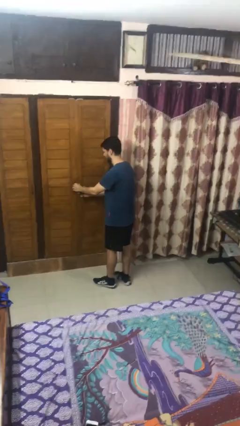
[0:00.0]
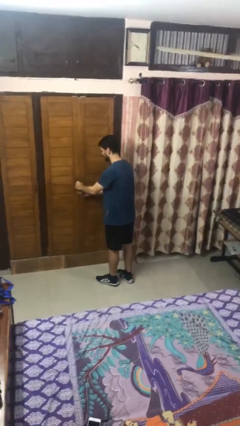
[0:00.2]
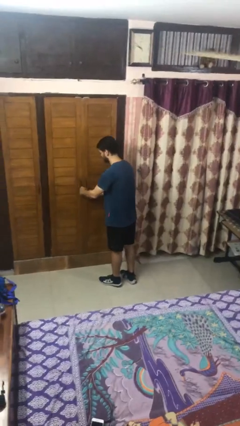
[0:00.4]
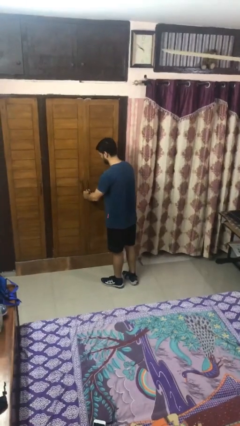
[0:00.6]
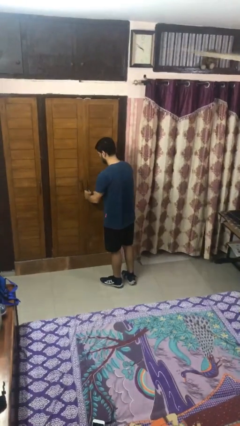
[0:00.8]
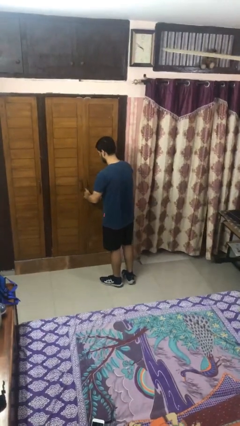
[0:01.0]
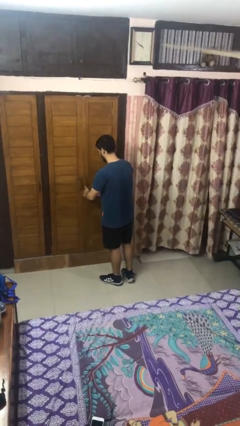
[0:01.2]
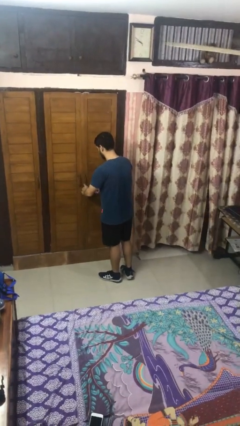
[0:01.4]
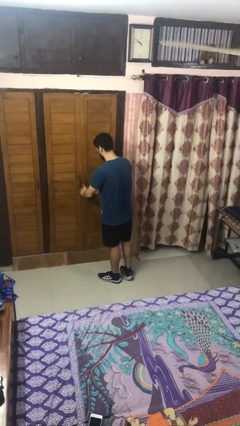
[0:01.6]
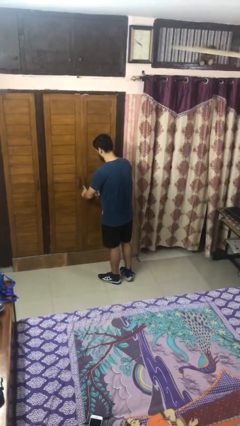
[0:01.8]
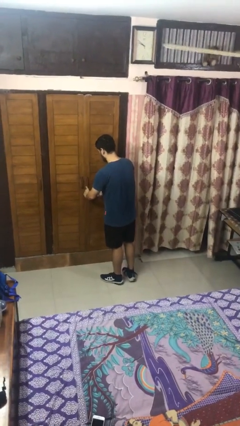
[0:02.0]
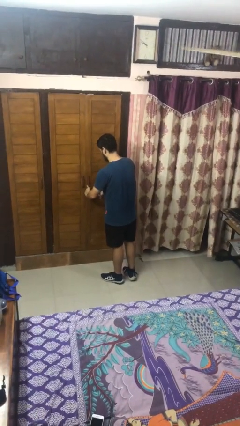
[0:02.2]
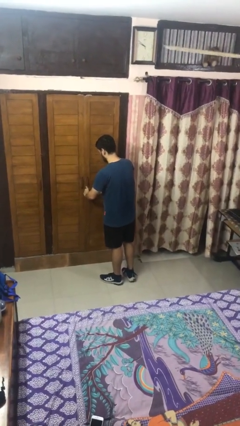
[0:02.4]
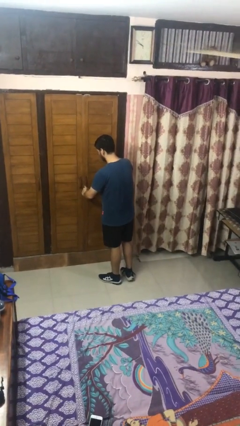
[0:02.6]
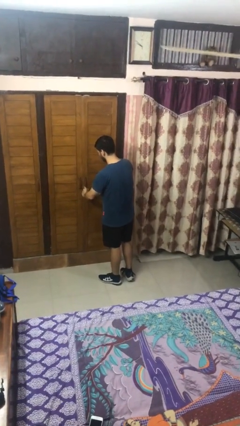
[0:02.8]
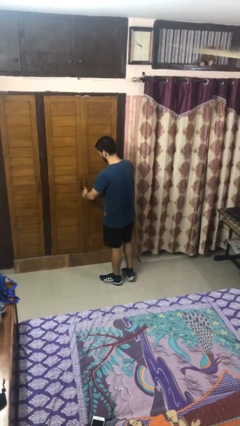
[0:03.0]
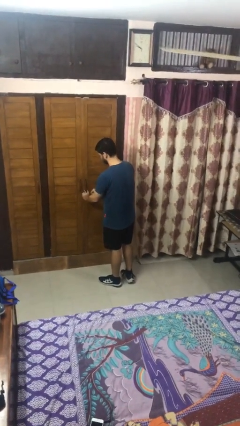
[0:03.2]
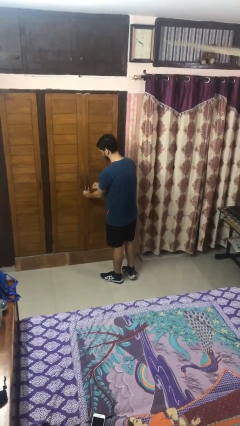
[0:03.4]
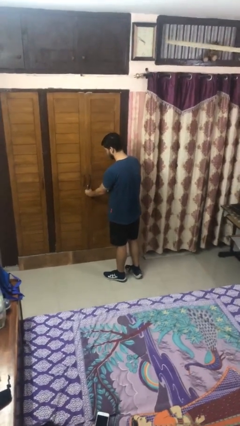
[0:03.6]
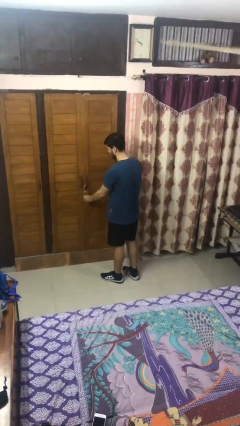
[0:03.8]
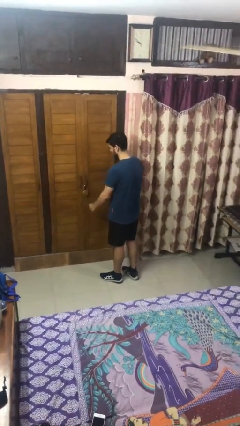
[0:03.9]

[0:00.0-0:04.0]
person locks door with keys

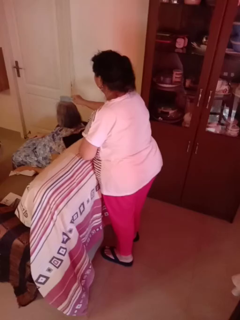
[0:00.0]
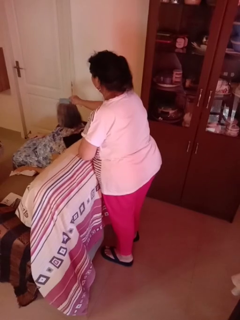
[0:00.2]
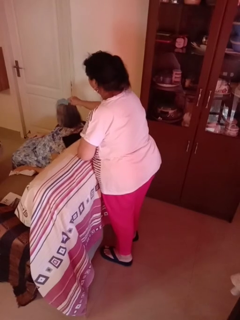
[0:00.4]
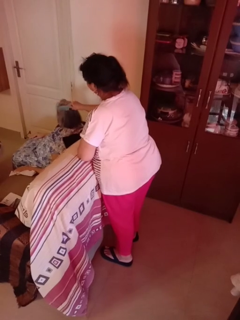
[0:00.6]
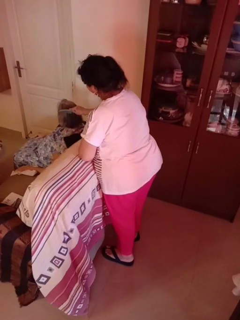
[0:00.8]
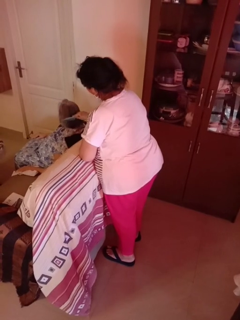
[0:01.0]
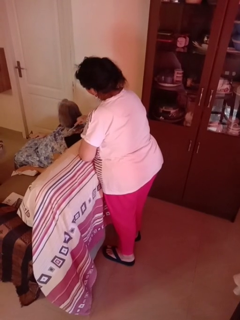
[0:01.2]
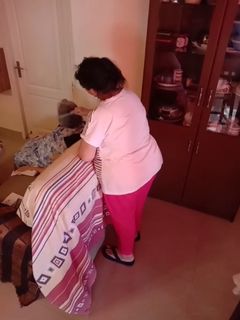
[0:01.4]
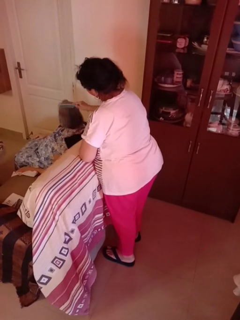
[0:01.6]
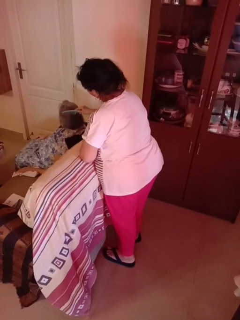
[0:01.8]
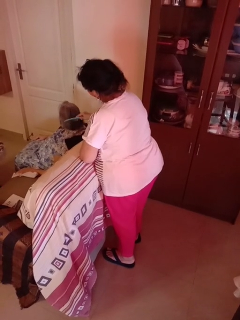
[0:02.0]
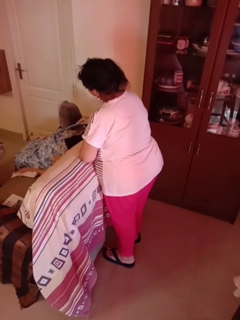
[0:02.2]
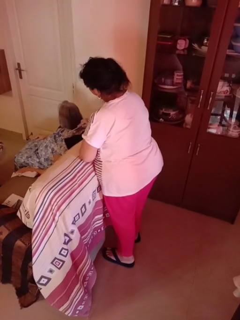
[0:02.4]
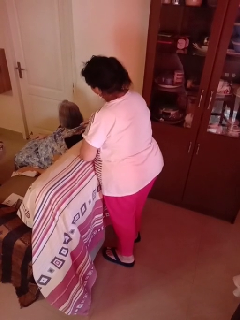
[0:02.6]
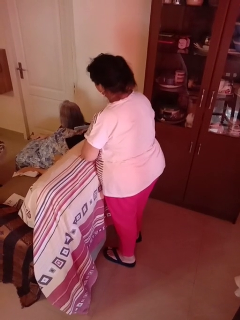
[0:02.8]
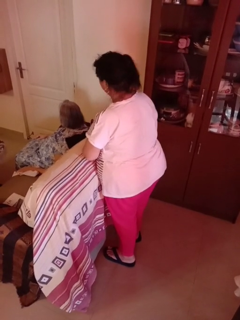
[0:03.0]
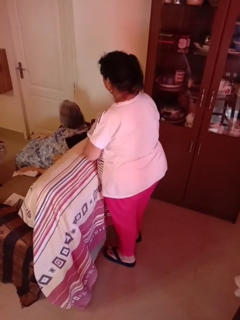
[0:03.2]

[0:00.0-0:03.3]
person brushes hair of person

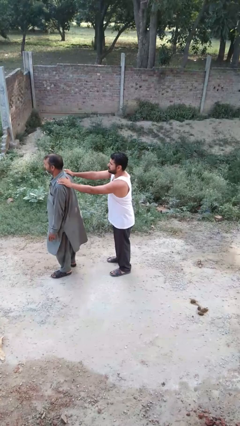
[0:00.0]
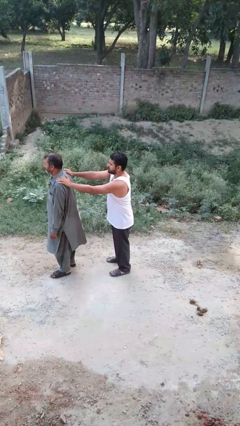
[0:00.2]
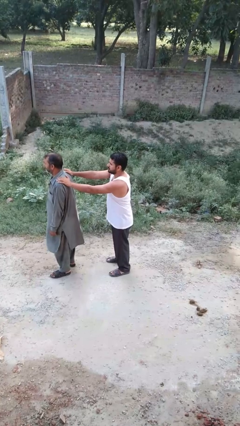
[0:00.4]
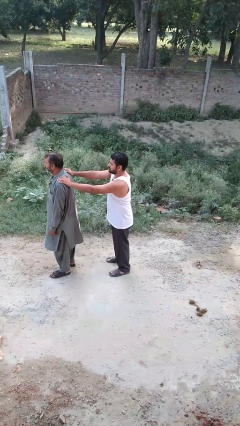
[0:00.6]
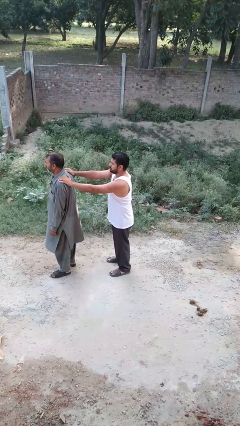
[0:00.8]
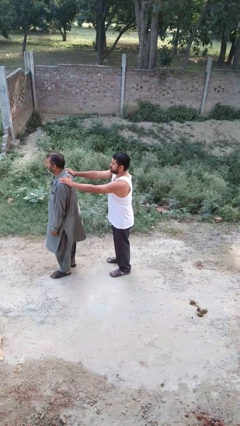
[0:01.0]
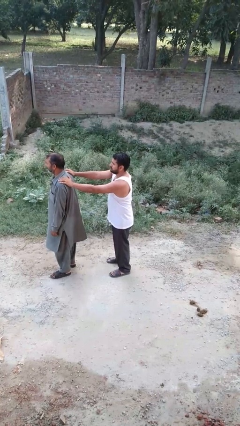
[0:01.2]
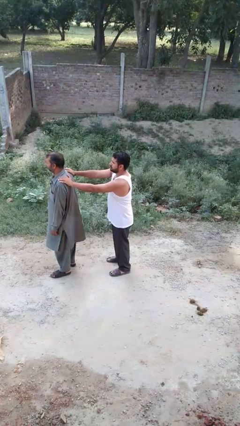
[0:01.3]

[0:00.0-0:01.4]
person grabs person by shoulder

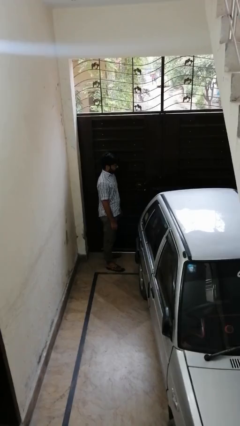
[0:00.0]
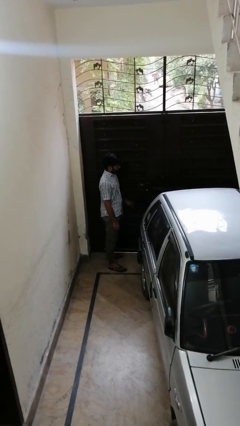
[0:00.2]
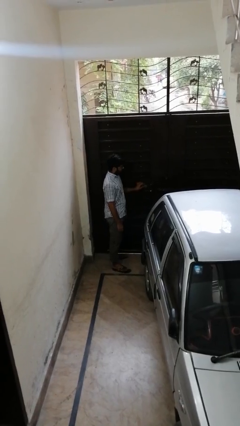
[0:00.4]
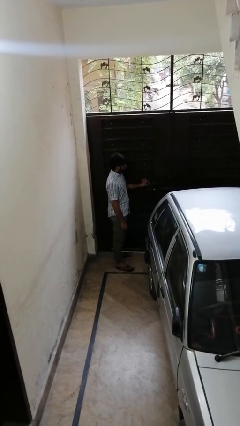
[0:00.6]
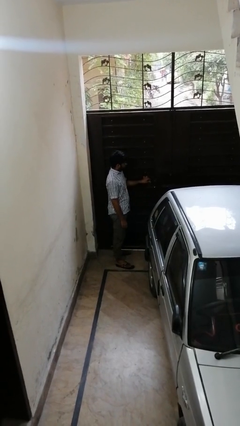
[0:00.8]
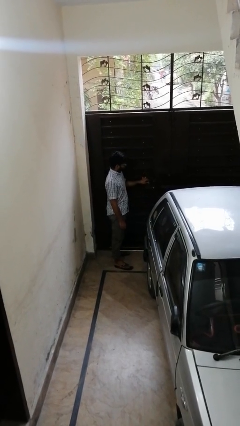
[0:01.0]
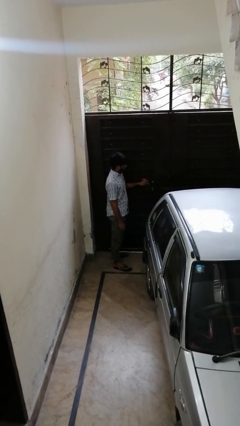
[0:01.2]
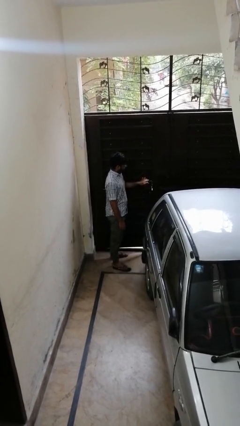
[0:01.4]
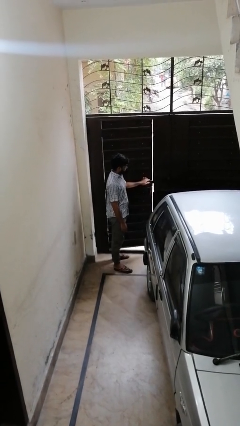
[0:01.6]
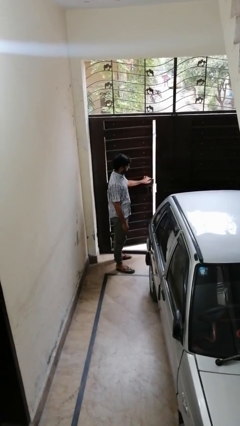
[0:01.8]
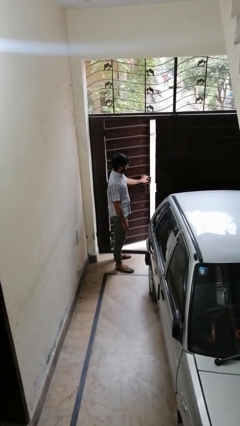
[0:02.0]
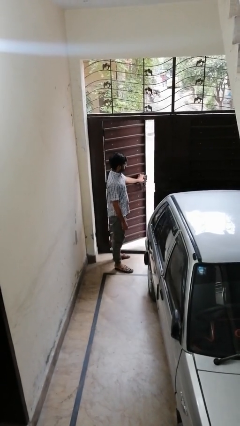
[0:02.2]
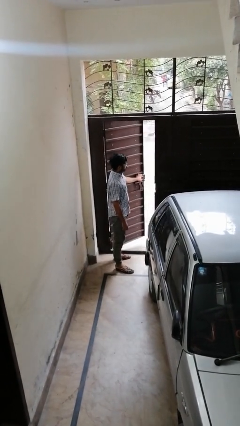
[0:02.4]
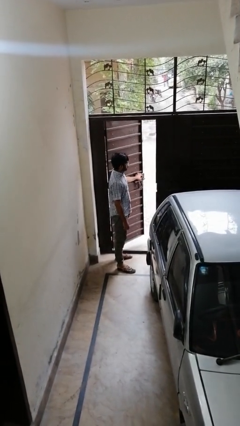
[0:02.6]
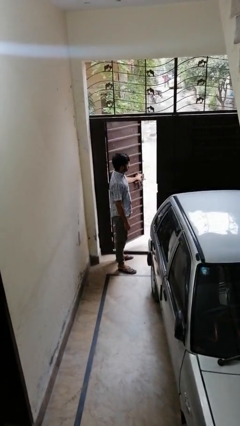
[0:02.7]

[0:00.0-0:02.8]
person opens gate

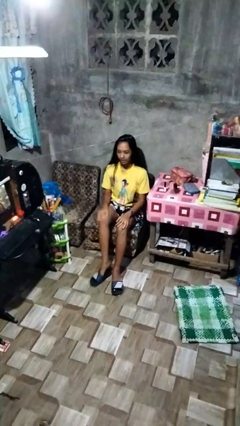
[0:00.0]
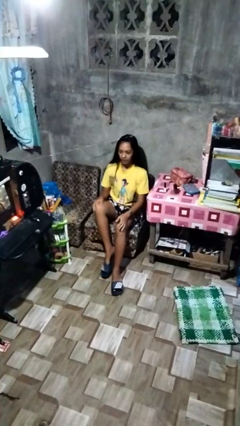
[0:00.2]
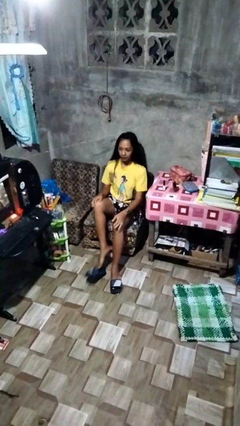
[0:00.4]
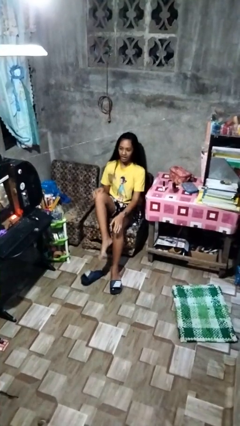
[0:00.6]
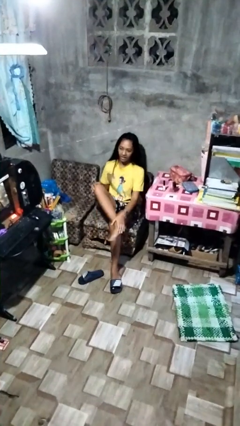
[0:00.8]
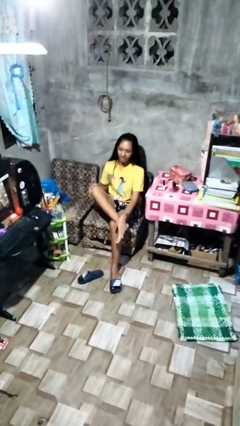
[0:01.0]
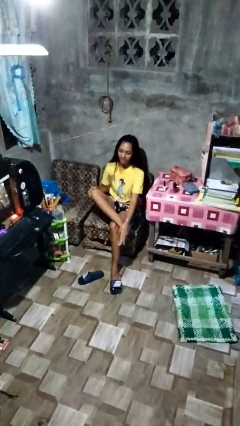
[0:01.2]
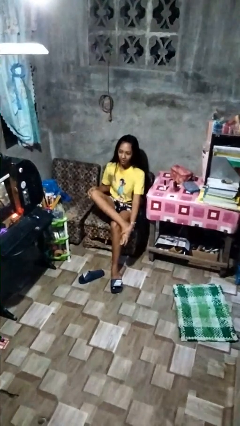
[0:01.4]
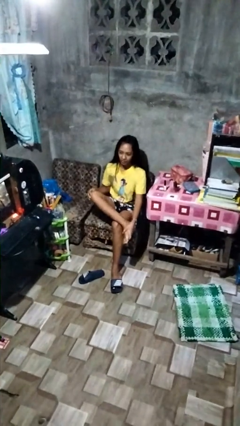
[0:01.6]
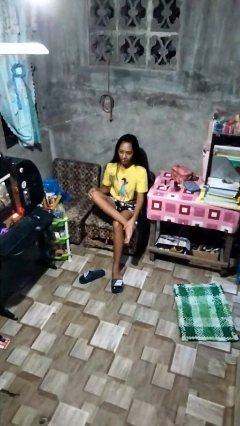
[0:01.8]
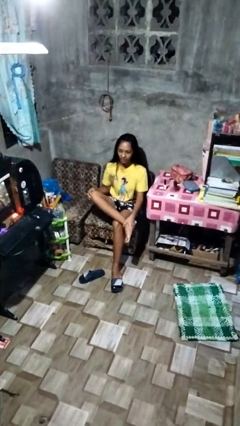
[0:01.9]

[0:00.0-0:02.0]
person rubs foot

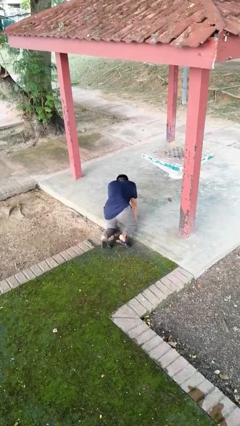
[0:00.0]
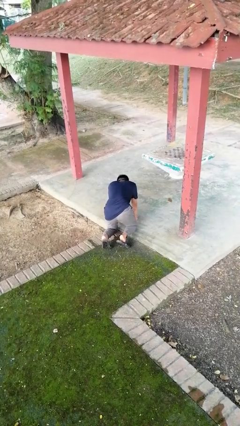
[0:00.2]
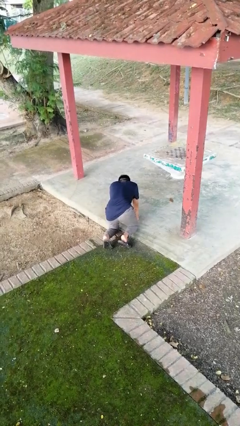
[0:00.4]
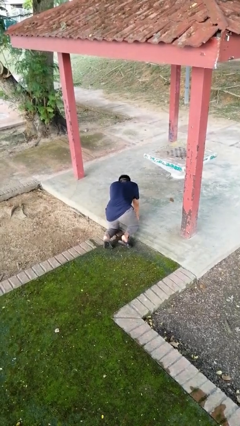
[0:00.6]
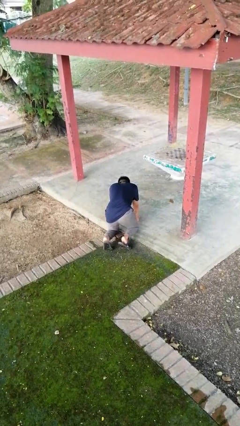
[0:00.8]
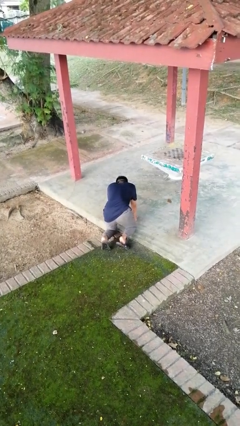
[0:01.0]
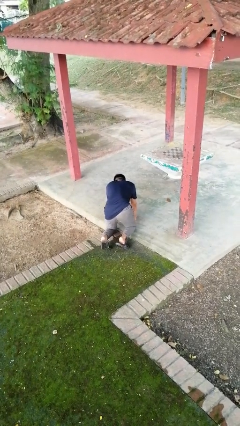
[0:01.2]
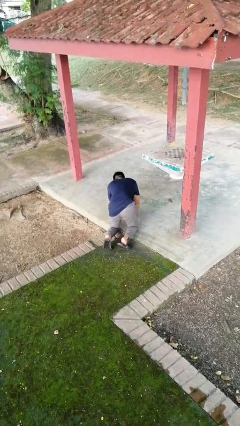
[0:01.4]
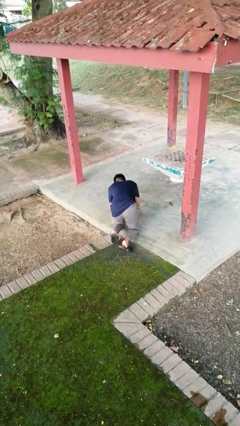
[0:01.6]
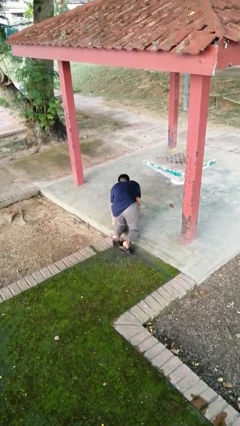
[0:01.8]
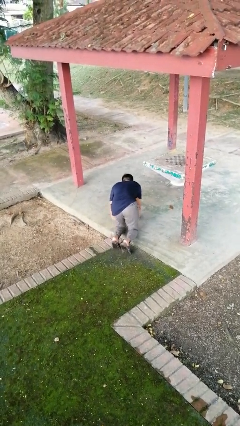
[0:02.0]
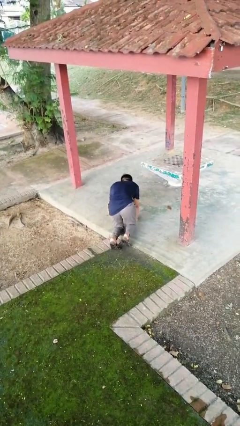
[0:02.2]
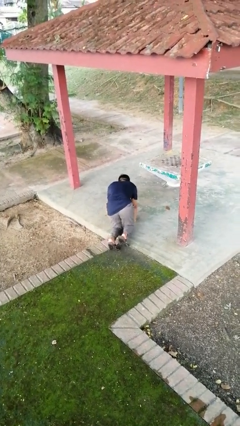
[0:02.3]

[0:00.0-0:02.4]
person crawls

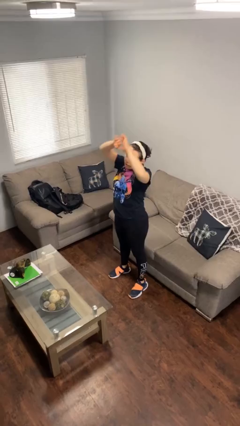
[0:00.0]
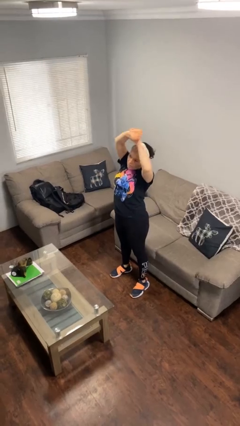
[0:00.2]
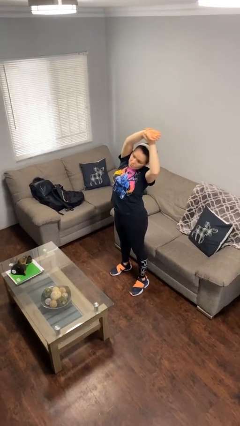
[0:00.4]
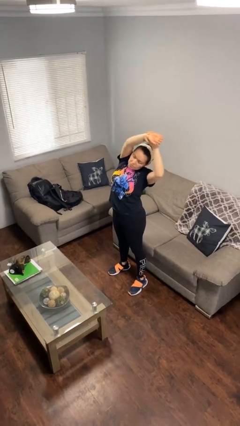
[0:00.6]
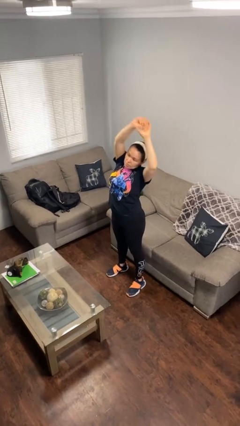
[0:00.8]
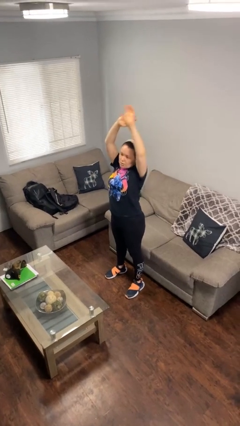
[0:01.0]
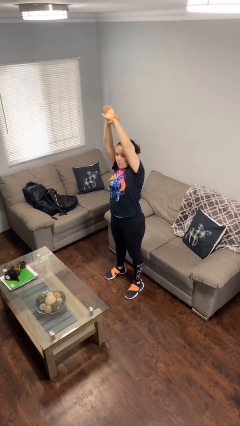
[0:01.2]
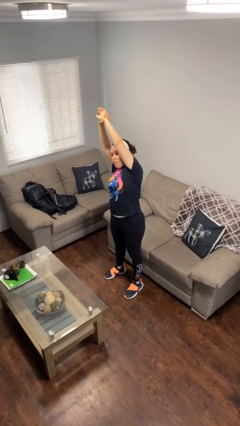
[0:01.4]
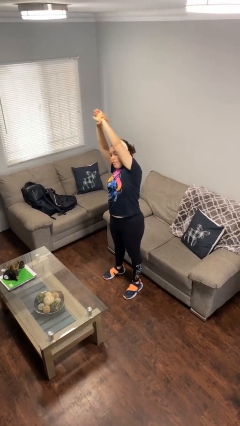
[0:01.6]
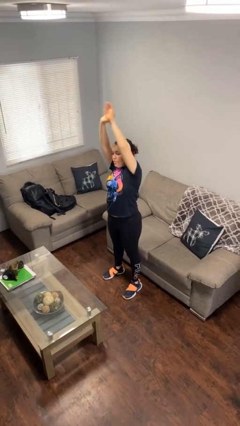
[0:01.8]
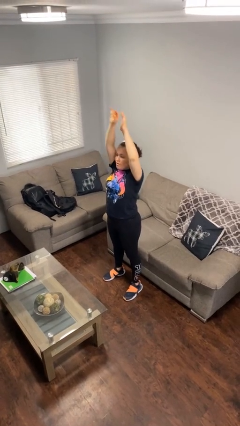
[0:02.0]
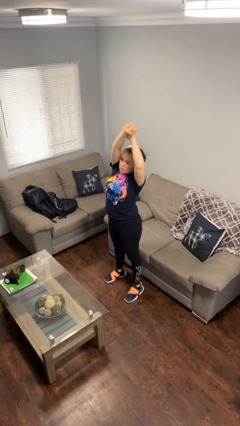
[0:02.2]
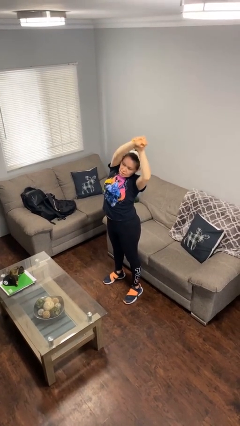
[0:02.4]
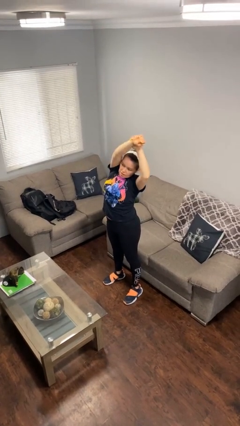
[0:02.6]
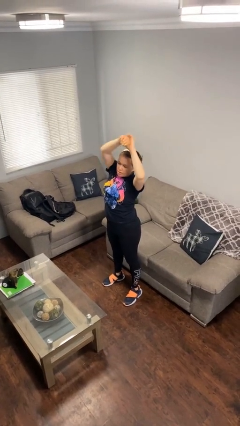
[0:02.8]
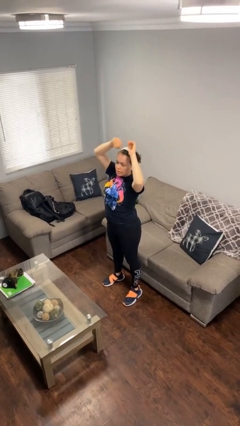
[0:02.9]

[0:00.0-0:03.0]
person stretches arms over head
